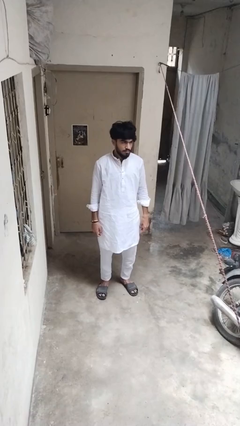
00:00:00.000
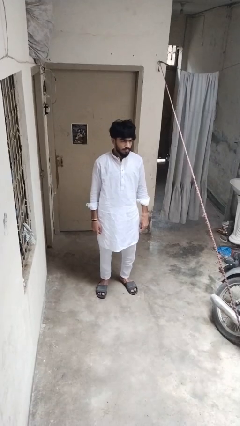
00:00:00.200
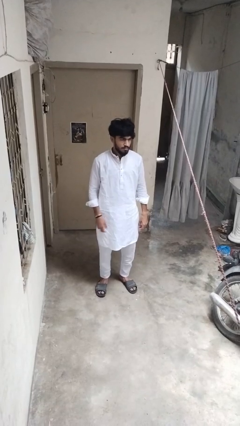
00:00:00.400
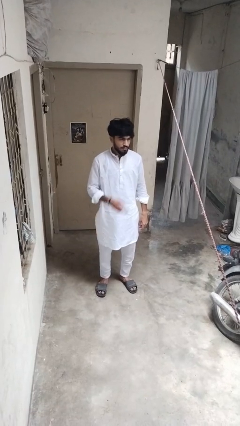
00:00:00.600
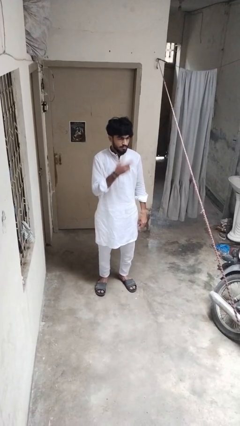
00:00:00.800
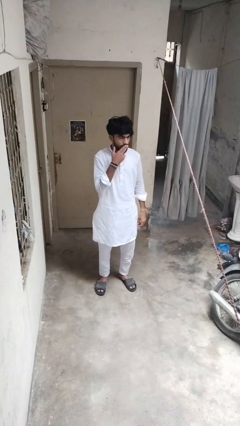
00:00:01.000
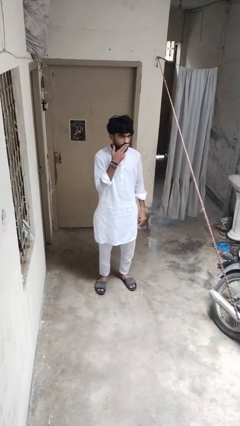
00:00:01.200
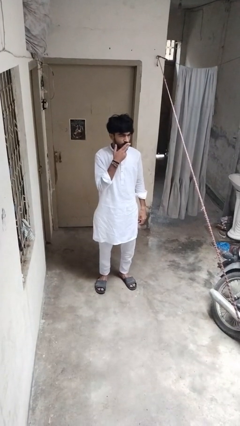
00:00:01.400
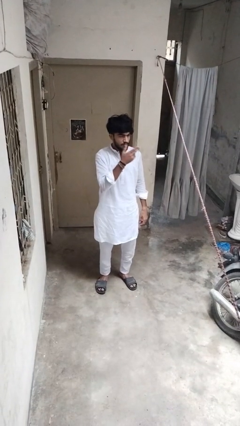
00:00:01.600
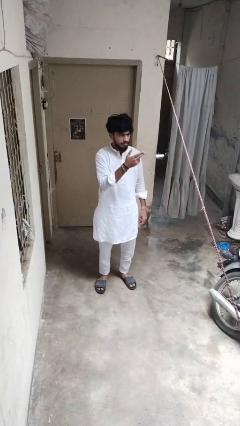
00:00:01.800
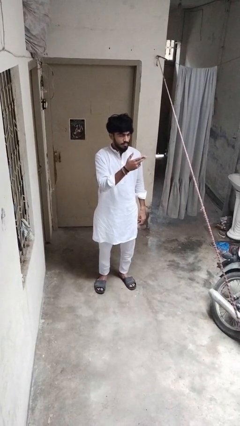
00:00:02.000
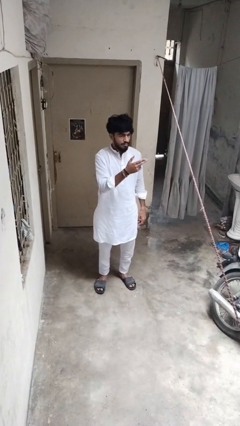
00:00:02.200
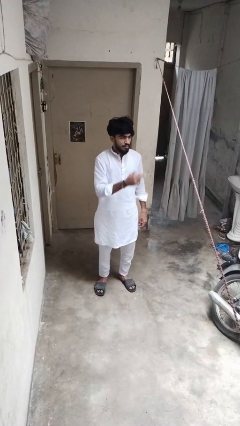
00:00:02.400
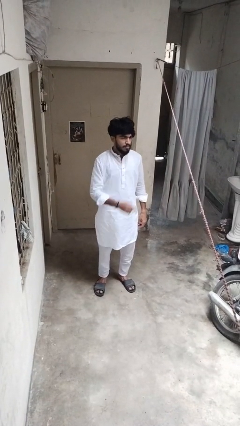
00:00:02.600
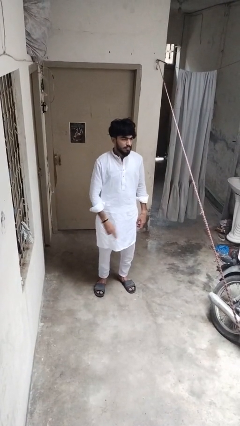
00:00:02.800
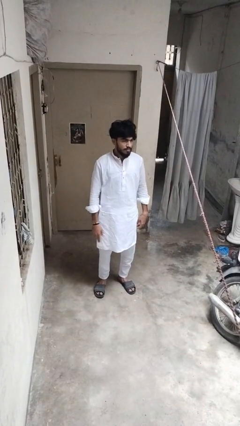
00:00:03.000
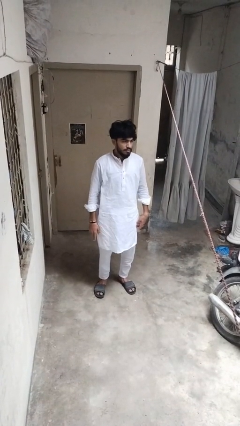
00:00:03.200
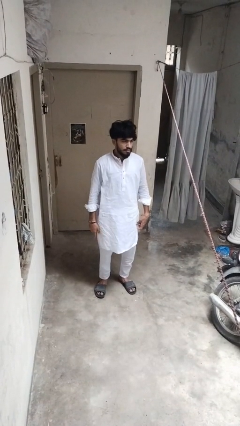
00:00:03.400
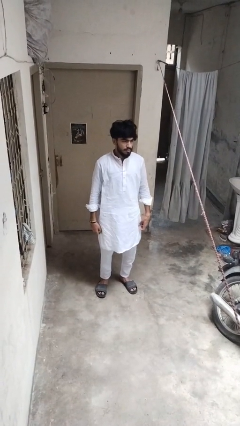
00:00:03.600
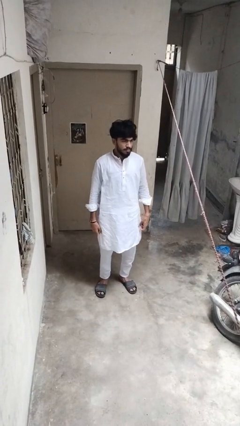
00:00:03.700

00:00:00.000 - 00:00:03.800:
person gestures blow kiss

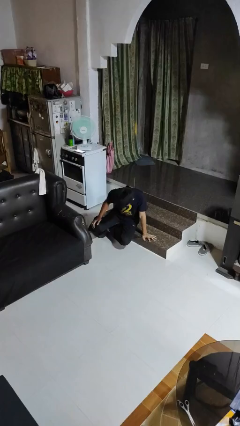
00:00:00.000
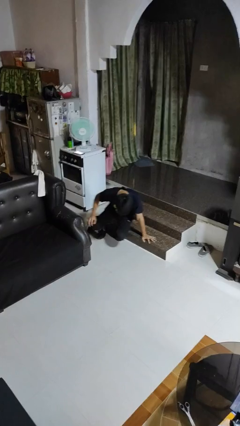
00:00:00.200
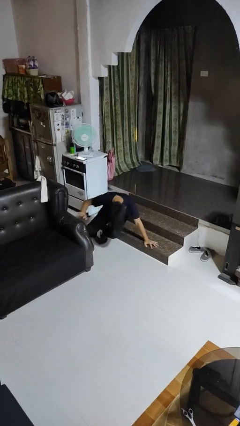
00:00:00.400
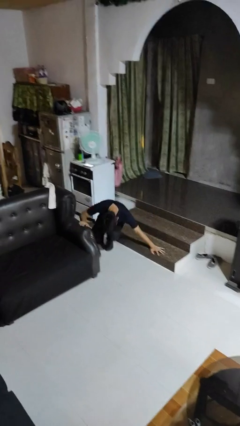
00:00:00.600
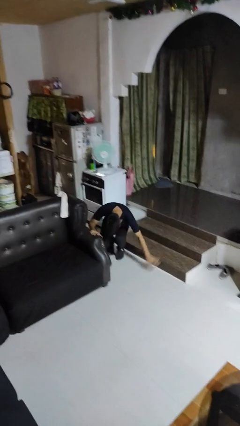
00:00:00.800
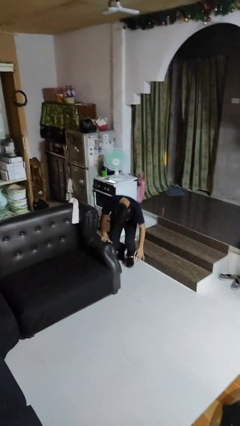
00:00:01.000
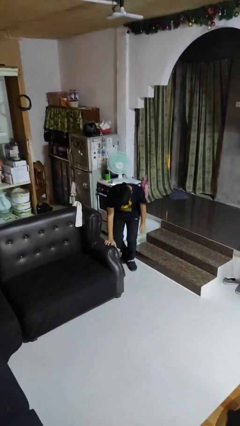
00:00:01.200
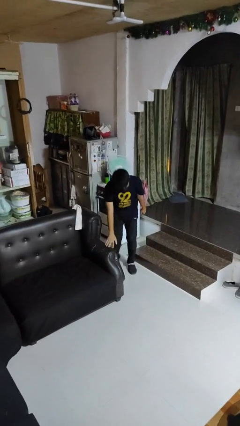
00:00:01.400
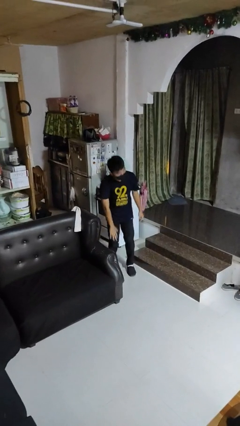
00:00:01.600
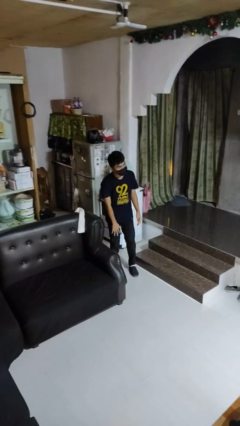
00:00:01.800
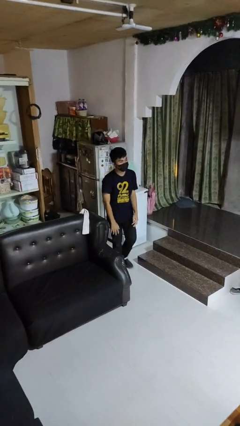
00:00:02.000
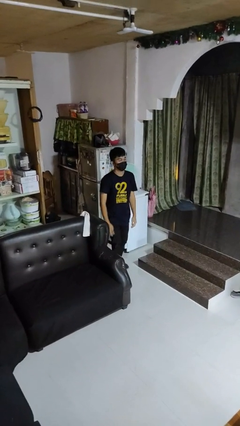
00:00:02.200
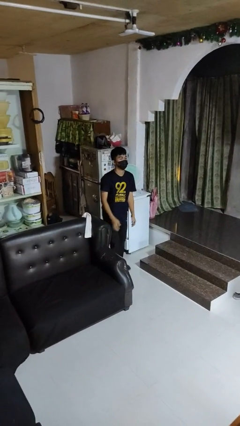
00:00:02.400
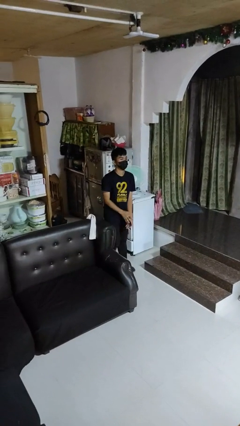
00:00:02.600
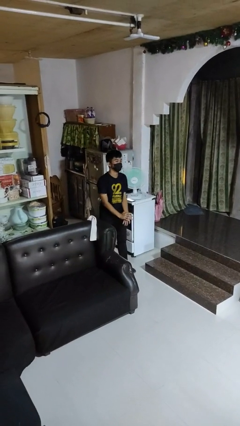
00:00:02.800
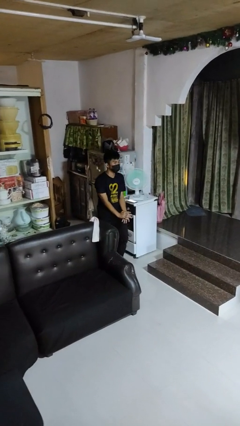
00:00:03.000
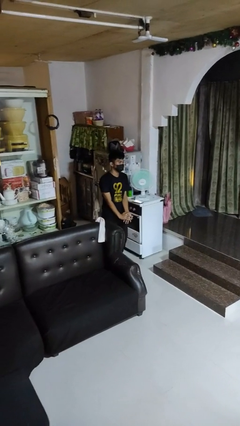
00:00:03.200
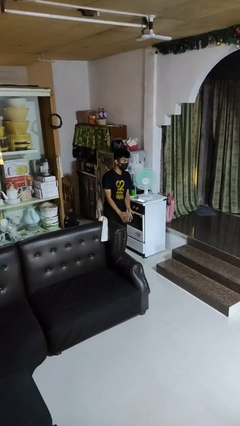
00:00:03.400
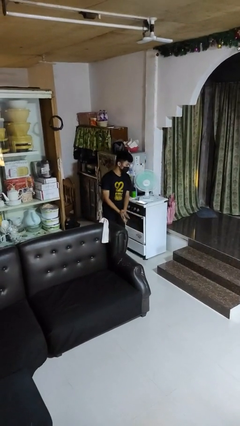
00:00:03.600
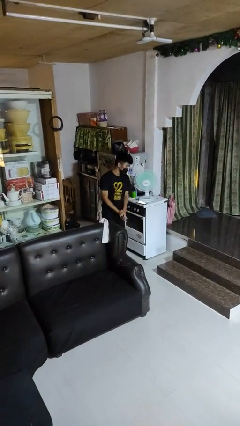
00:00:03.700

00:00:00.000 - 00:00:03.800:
person stands up from floor

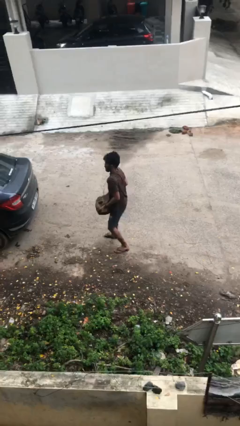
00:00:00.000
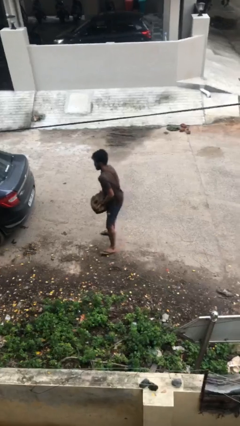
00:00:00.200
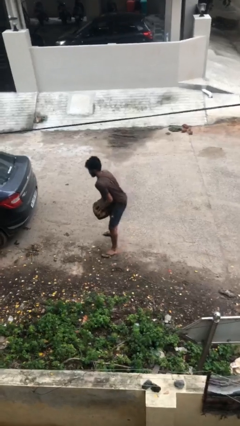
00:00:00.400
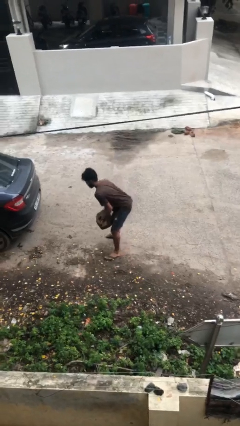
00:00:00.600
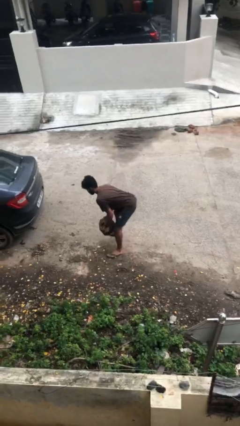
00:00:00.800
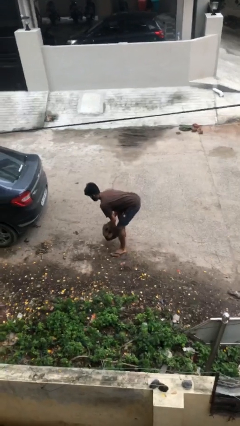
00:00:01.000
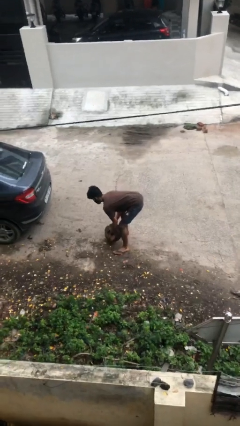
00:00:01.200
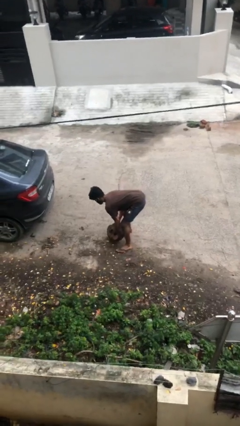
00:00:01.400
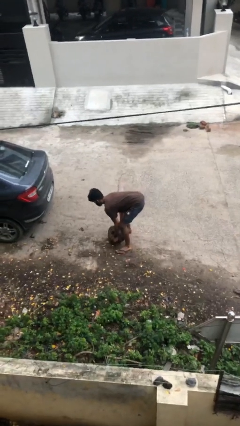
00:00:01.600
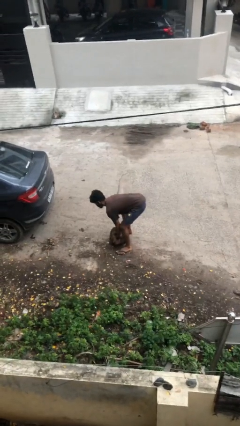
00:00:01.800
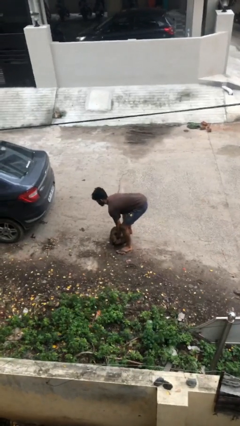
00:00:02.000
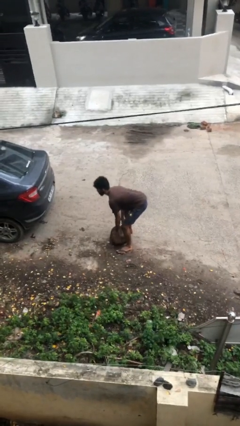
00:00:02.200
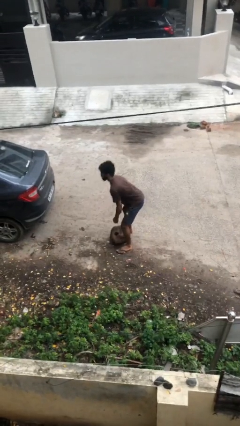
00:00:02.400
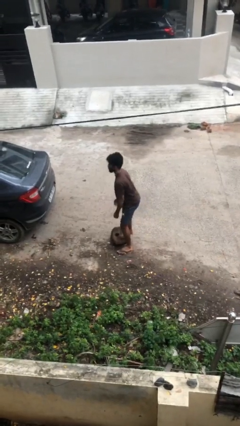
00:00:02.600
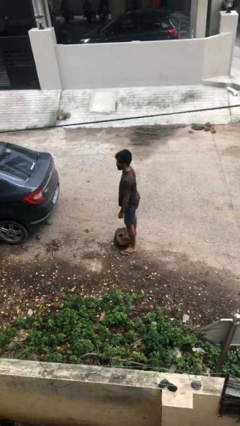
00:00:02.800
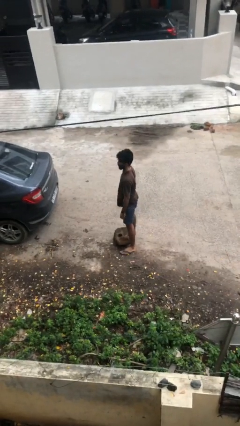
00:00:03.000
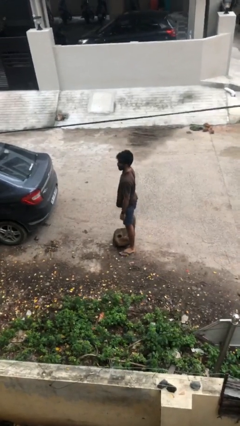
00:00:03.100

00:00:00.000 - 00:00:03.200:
person puts down object on floor

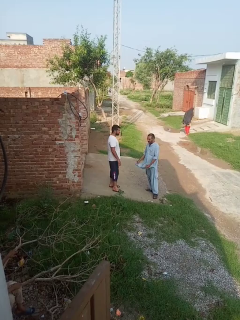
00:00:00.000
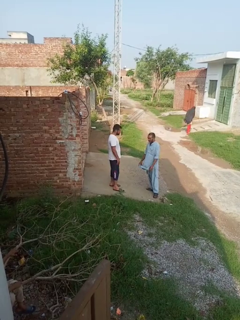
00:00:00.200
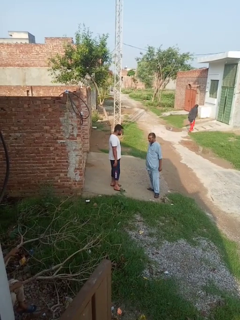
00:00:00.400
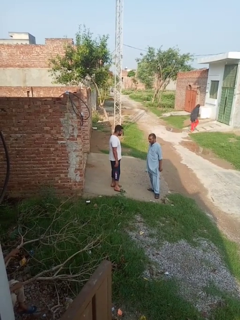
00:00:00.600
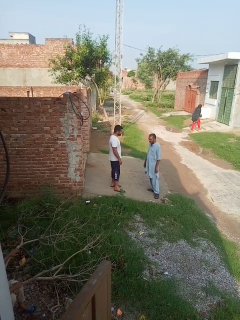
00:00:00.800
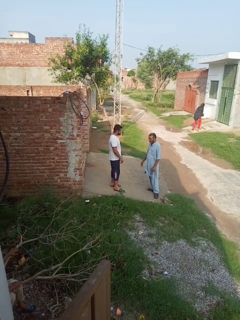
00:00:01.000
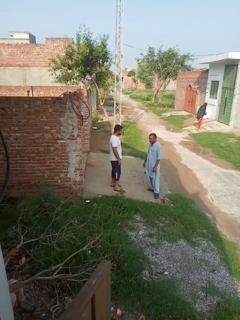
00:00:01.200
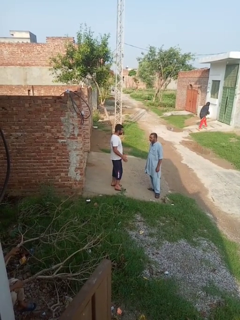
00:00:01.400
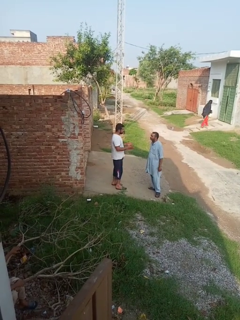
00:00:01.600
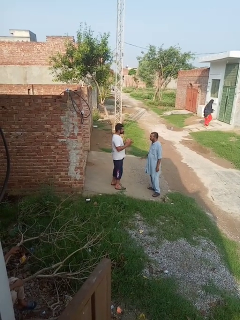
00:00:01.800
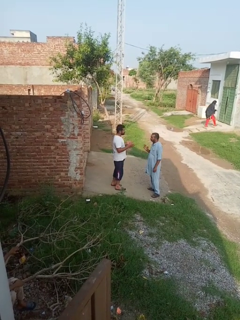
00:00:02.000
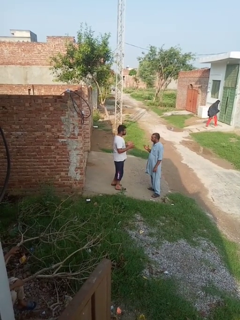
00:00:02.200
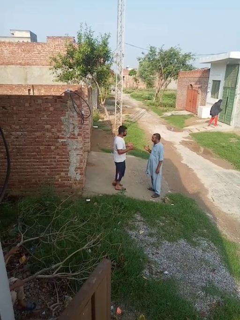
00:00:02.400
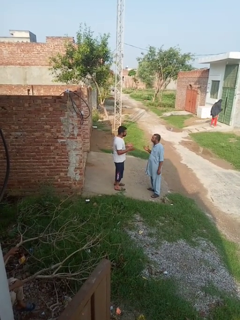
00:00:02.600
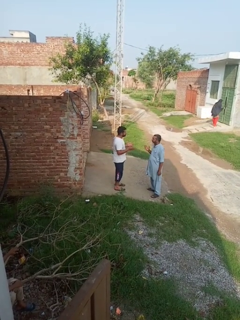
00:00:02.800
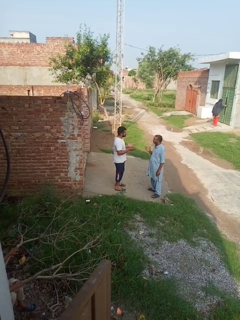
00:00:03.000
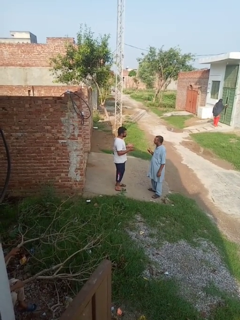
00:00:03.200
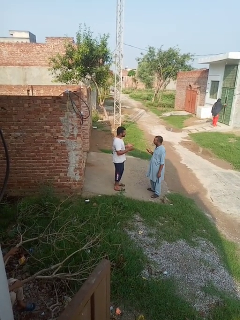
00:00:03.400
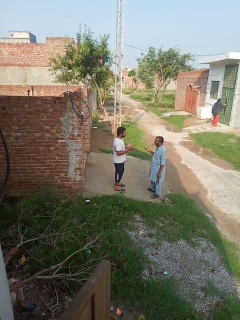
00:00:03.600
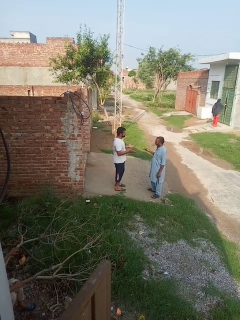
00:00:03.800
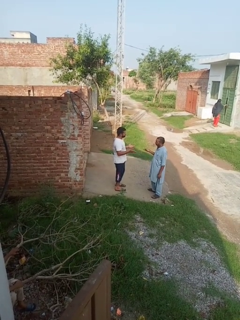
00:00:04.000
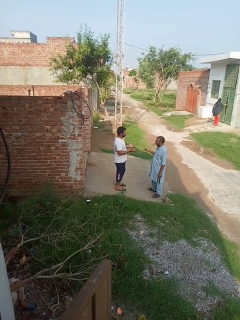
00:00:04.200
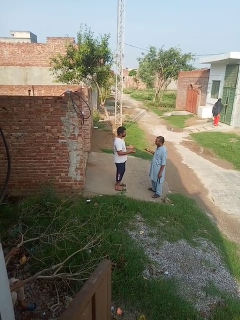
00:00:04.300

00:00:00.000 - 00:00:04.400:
person talks to person

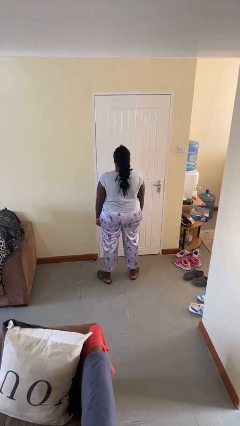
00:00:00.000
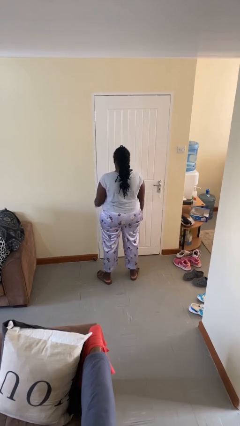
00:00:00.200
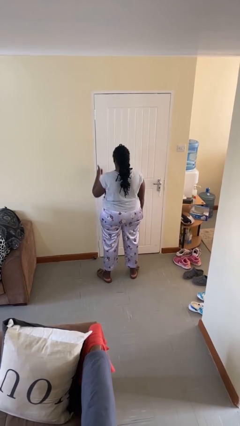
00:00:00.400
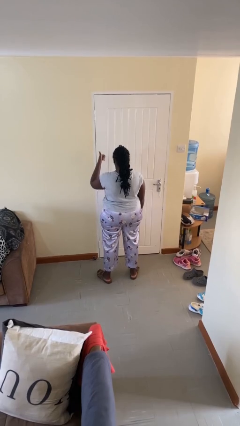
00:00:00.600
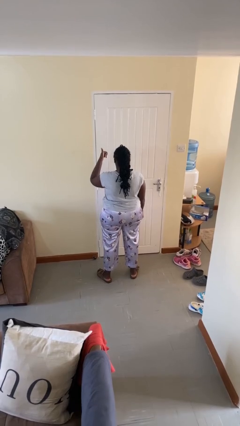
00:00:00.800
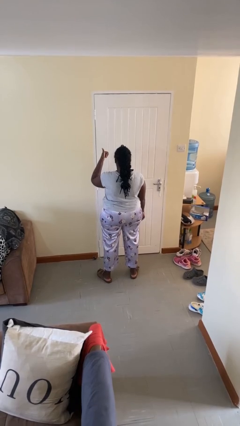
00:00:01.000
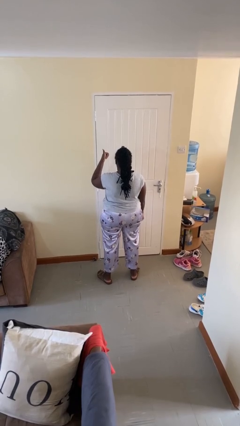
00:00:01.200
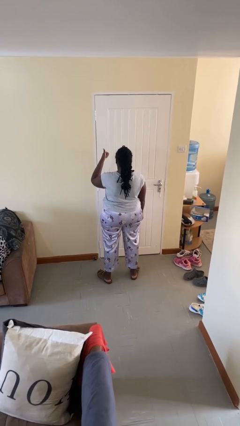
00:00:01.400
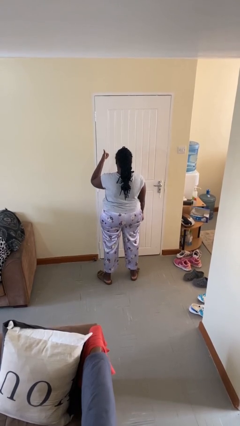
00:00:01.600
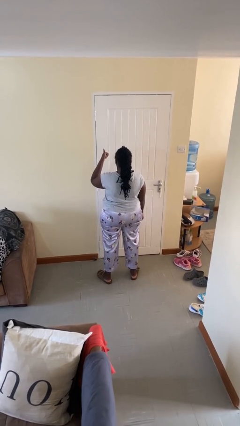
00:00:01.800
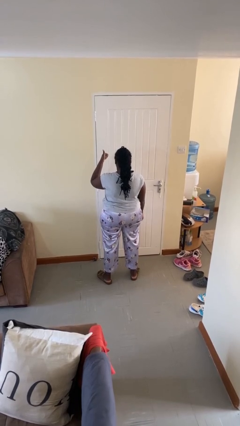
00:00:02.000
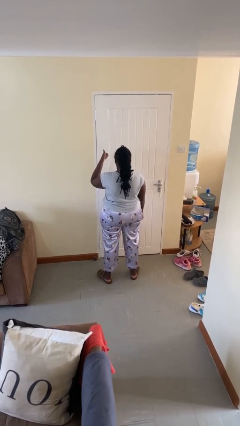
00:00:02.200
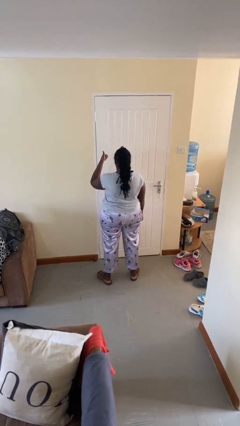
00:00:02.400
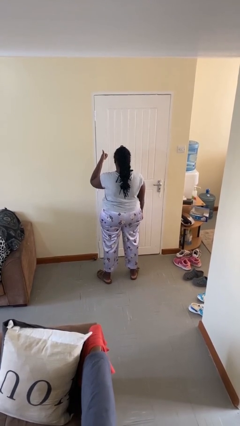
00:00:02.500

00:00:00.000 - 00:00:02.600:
person gestures thumbs up

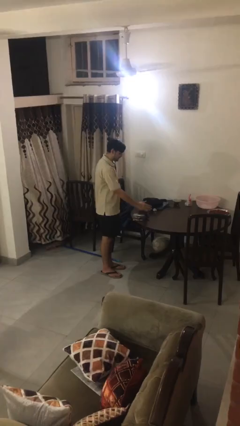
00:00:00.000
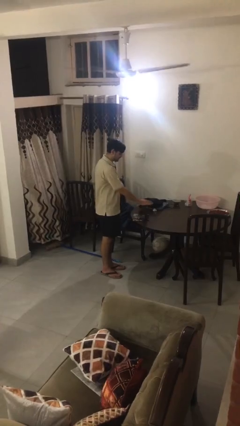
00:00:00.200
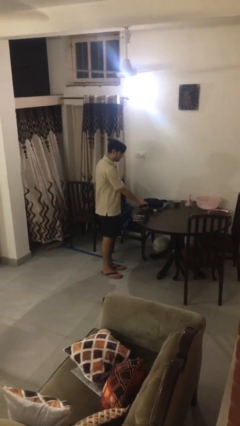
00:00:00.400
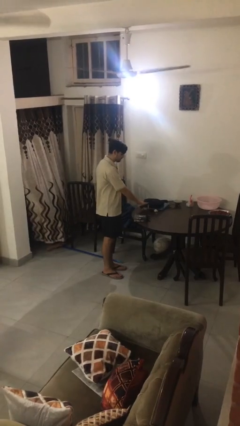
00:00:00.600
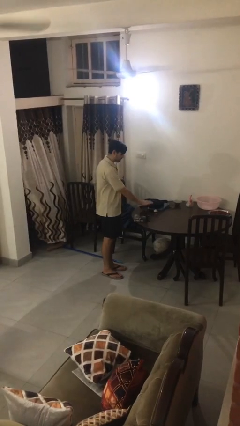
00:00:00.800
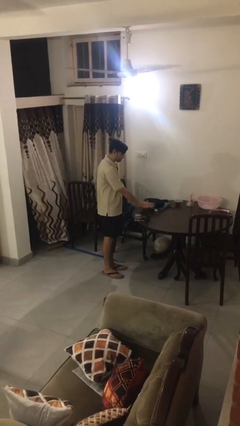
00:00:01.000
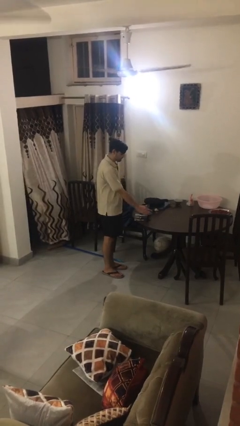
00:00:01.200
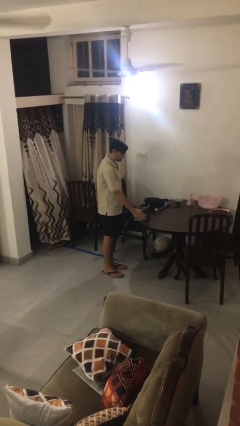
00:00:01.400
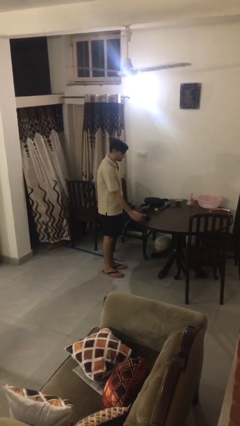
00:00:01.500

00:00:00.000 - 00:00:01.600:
person waves hand over object
